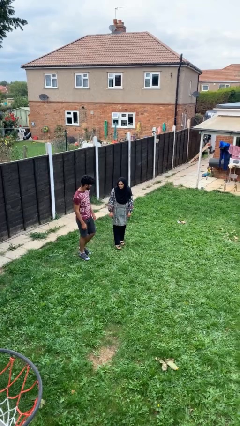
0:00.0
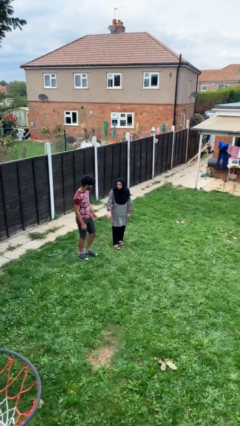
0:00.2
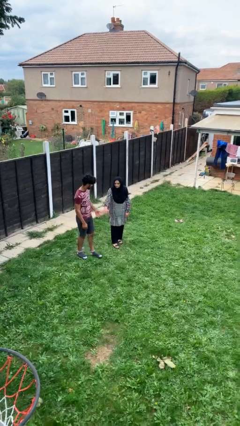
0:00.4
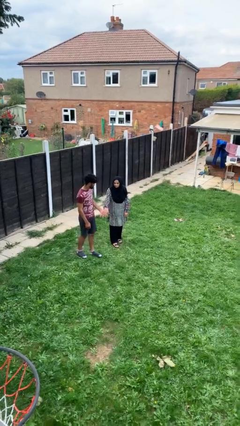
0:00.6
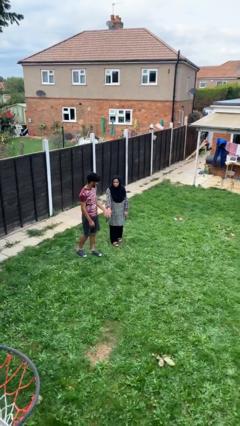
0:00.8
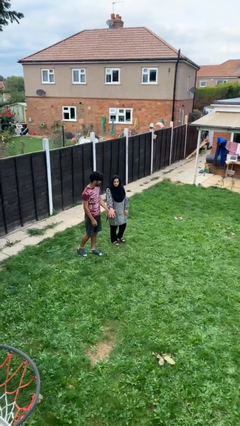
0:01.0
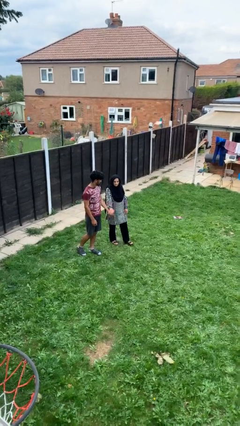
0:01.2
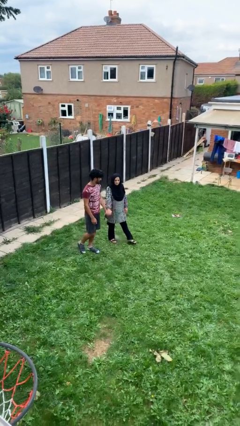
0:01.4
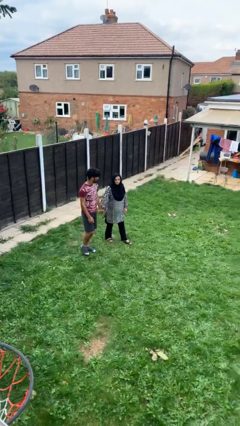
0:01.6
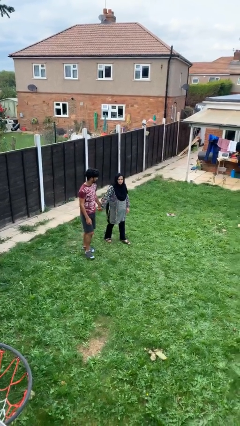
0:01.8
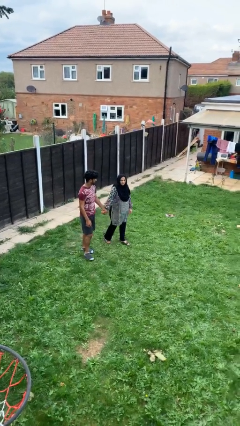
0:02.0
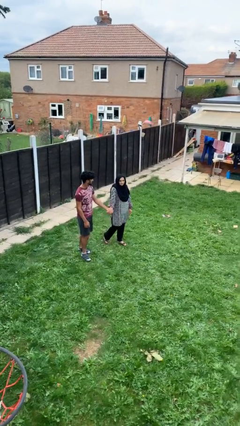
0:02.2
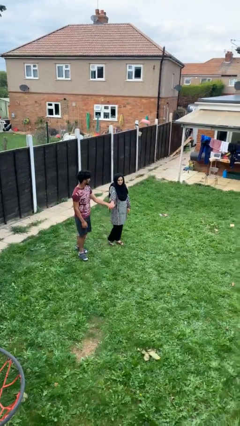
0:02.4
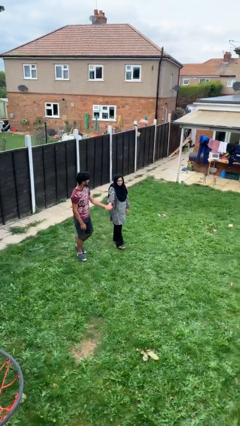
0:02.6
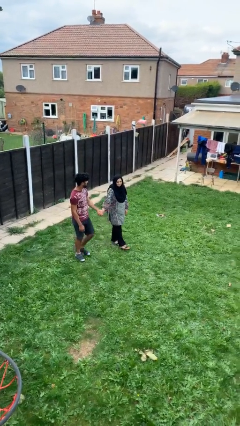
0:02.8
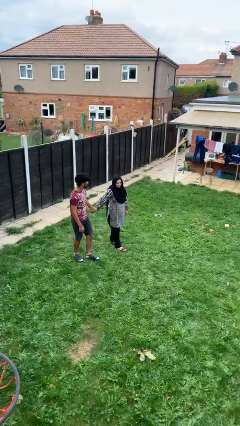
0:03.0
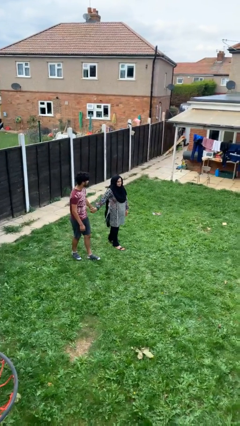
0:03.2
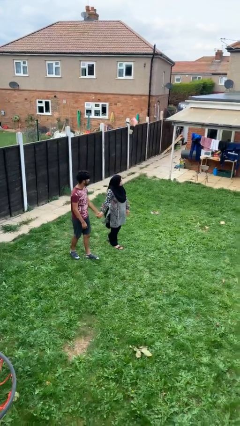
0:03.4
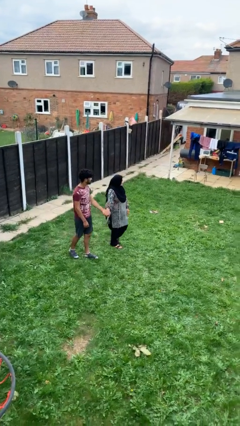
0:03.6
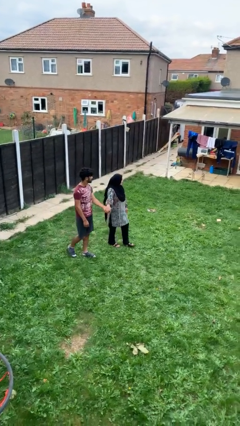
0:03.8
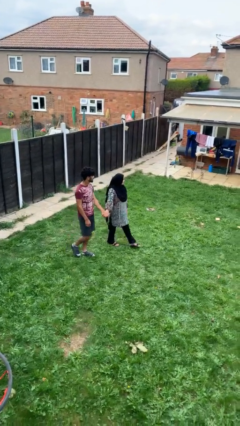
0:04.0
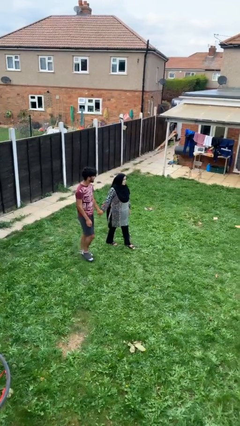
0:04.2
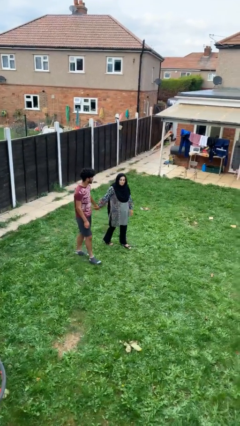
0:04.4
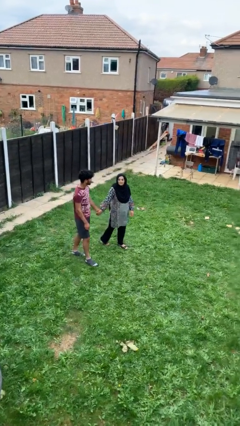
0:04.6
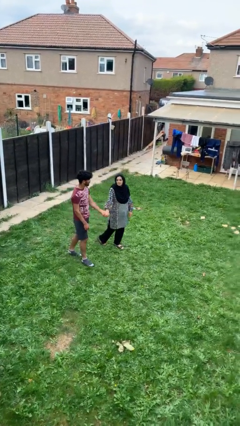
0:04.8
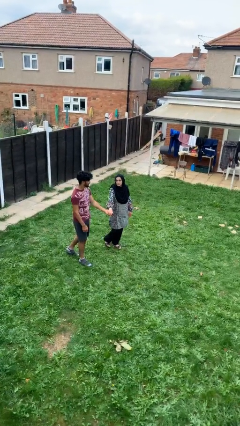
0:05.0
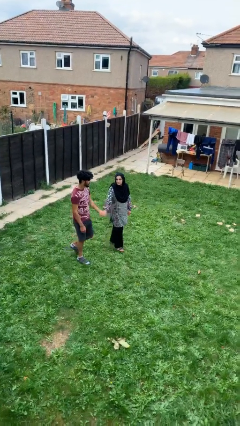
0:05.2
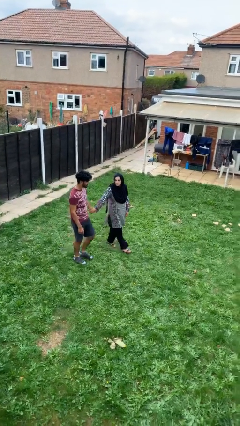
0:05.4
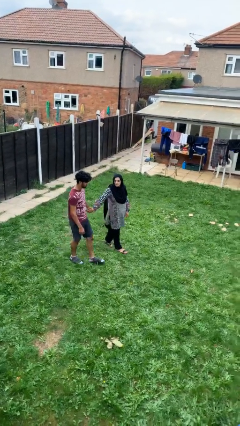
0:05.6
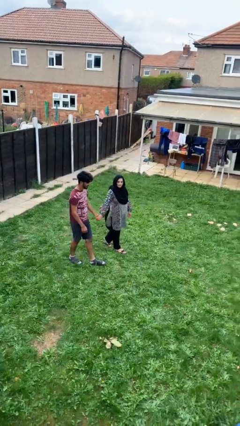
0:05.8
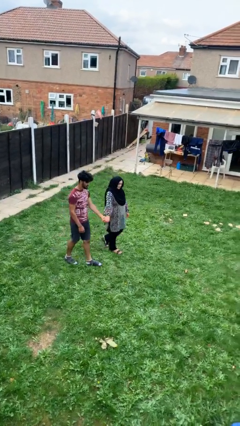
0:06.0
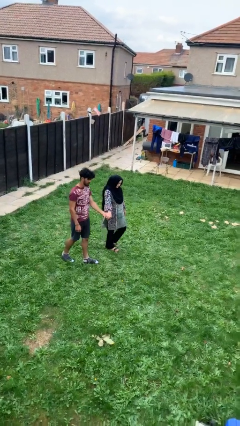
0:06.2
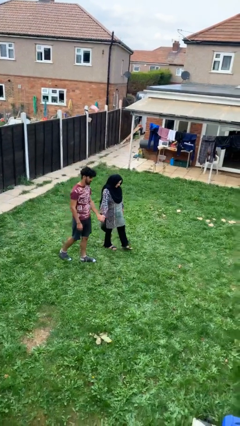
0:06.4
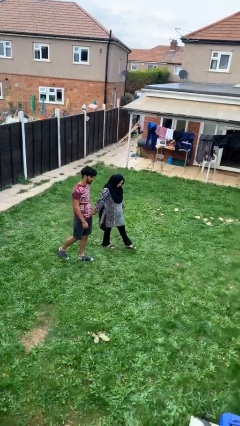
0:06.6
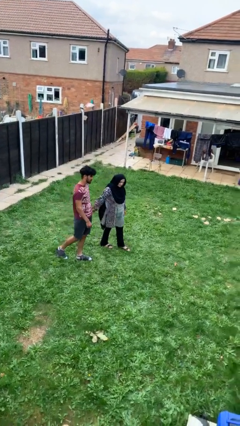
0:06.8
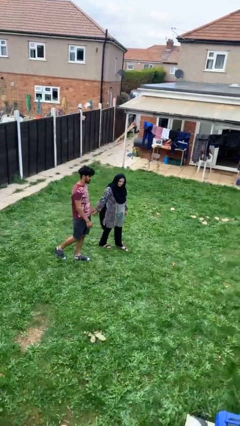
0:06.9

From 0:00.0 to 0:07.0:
person holds hand

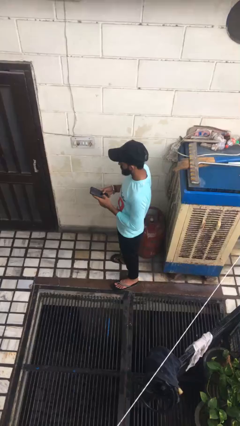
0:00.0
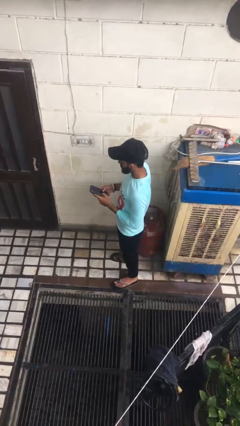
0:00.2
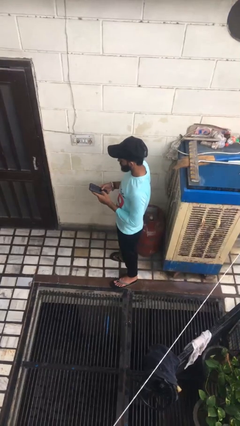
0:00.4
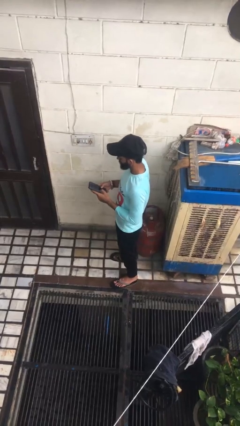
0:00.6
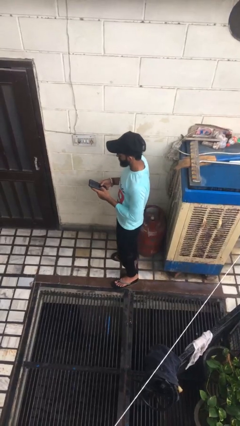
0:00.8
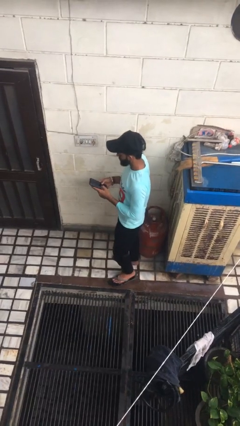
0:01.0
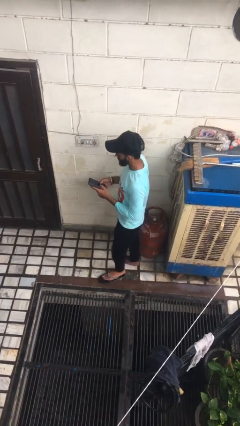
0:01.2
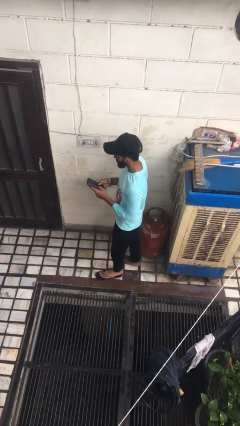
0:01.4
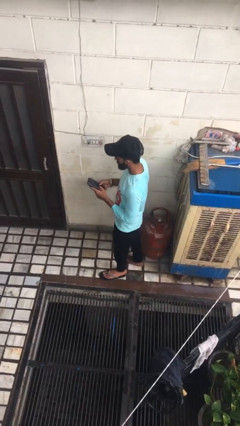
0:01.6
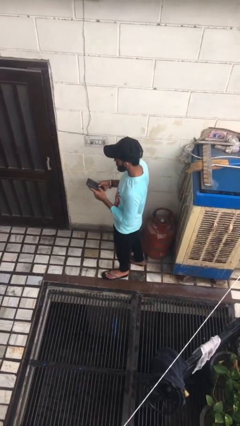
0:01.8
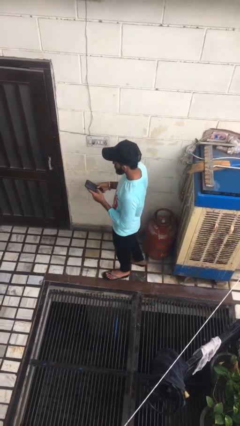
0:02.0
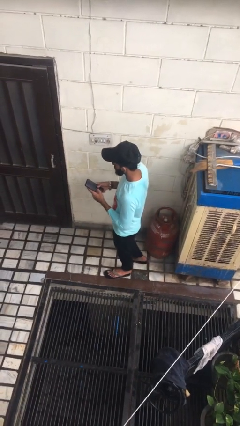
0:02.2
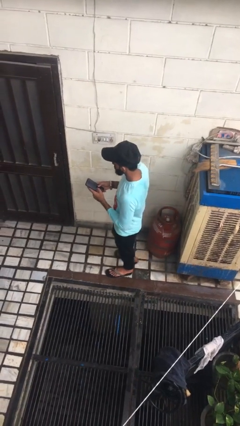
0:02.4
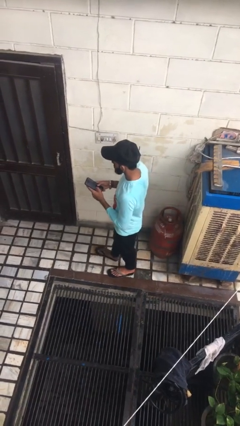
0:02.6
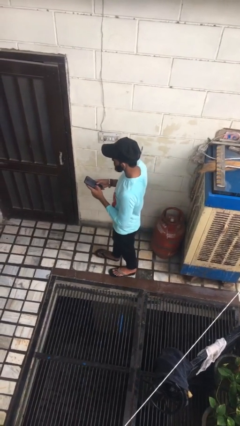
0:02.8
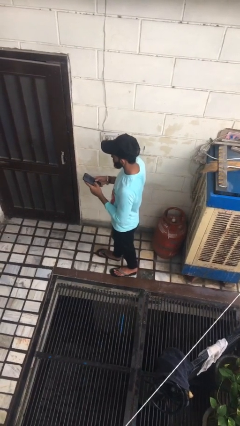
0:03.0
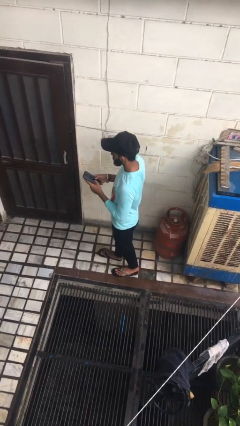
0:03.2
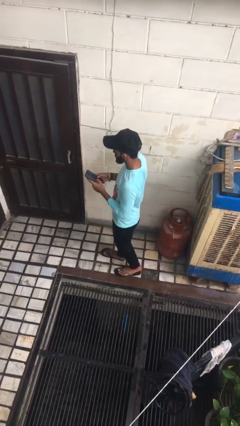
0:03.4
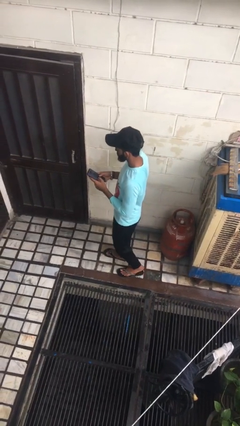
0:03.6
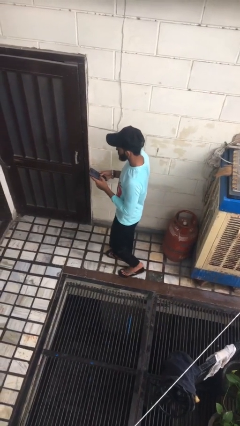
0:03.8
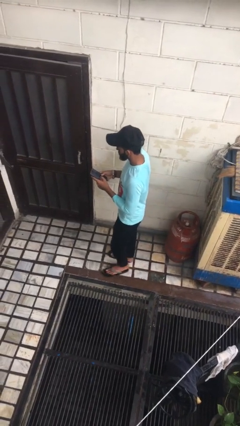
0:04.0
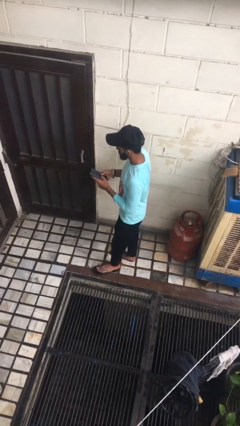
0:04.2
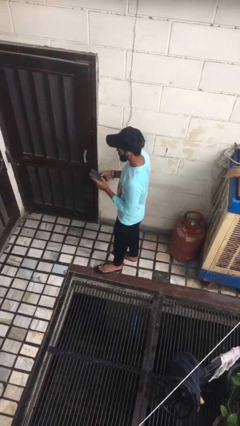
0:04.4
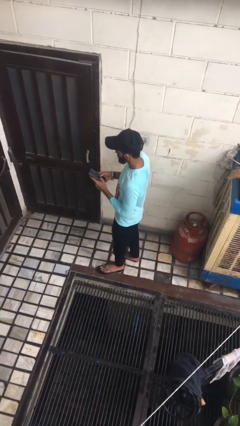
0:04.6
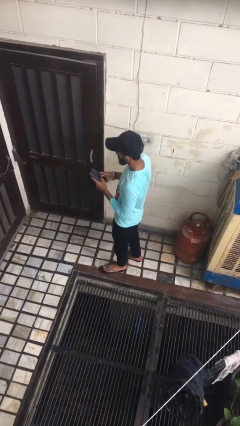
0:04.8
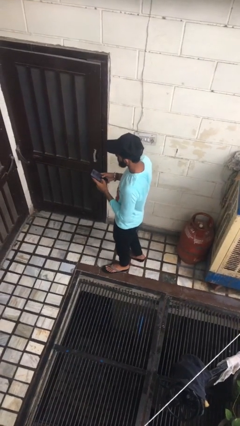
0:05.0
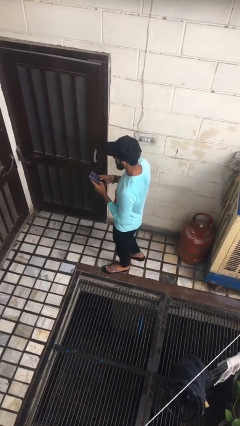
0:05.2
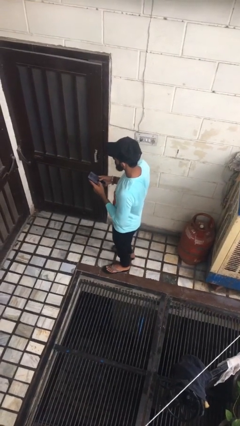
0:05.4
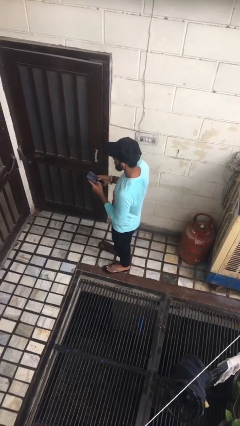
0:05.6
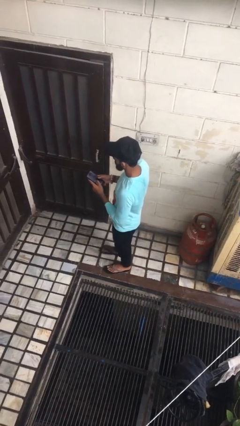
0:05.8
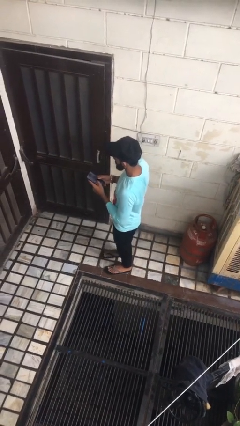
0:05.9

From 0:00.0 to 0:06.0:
person texts on phone

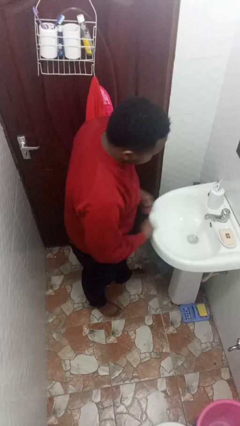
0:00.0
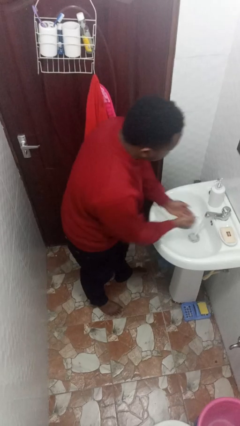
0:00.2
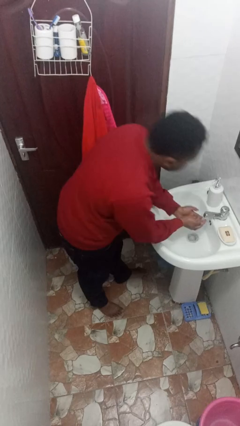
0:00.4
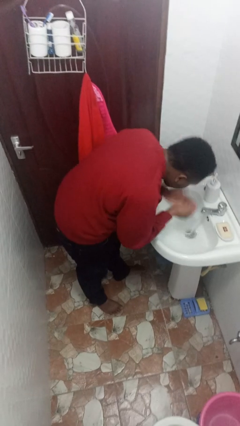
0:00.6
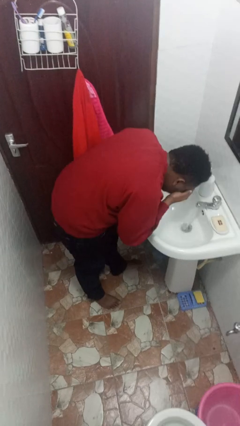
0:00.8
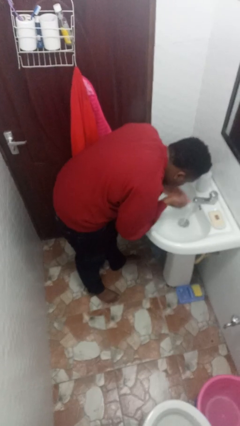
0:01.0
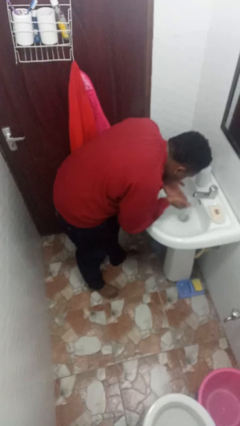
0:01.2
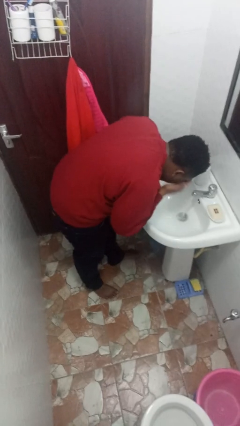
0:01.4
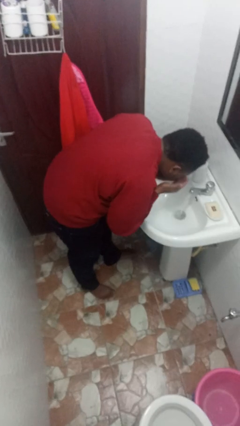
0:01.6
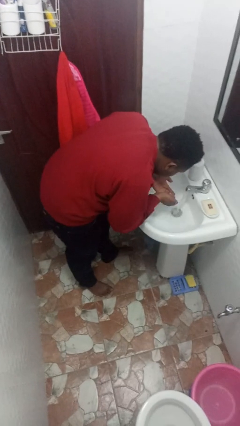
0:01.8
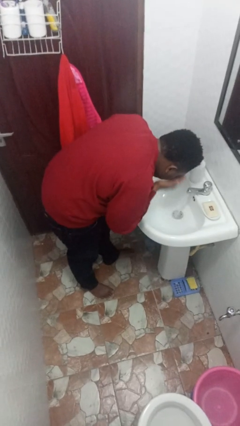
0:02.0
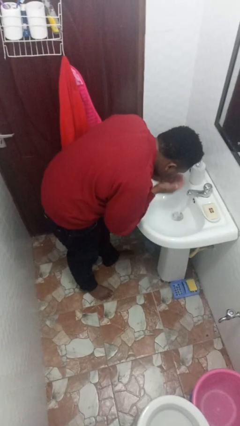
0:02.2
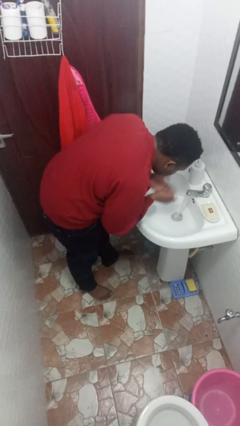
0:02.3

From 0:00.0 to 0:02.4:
person washes face

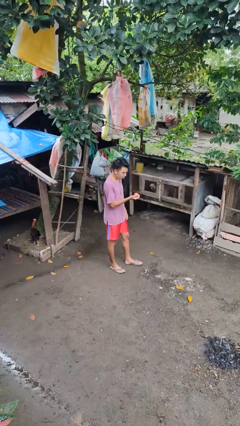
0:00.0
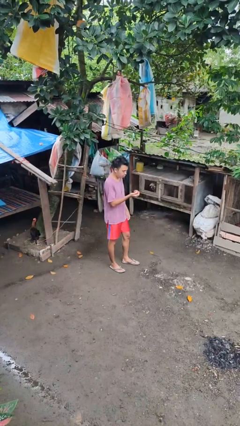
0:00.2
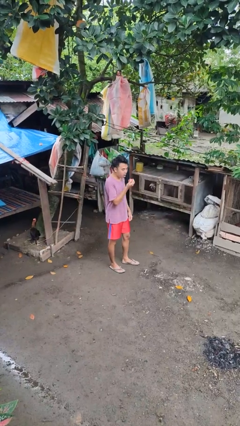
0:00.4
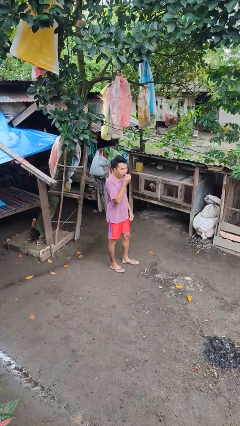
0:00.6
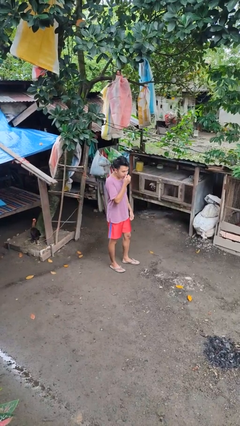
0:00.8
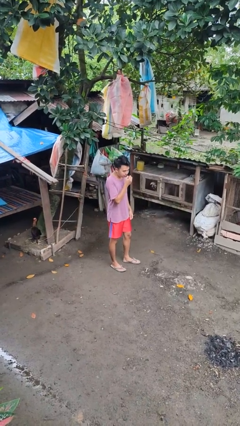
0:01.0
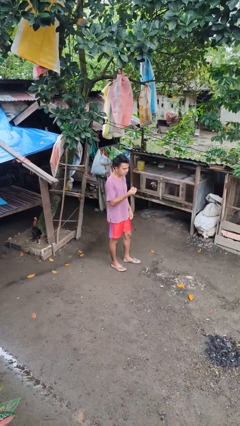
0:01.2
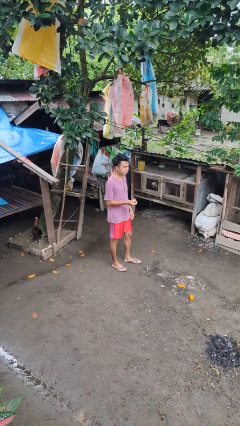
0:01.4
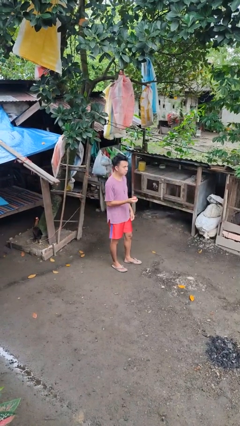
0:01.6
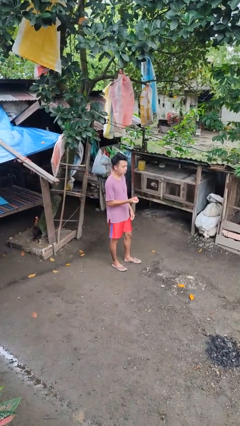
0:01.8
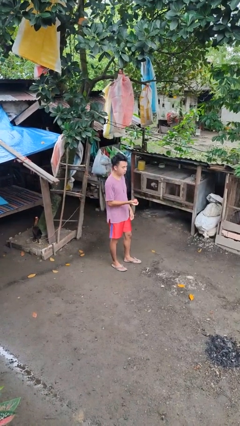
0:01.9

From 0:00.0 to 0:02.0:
person eats apple
